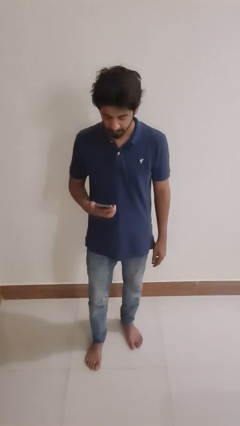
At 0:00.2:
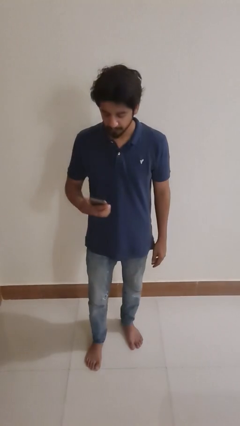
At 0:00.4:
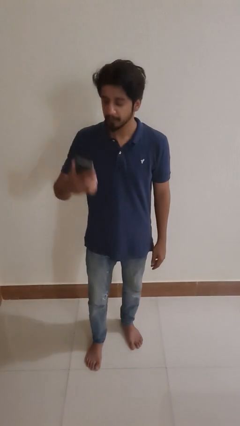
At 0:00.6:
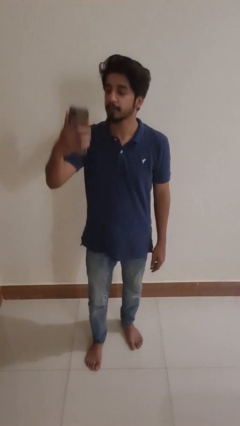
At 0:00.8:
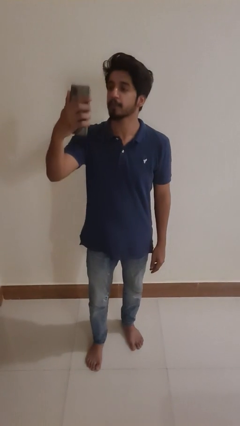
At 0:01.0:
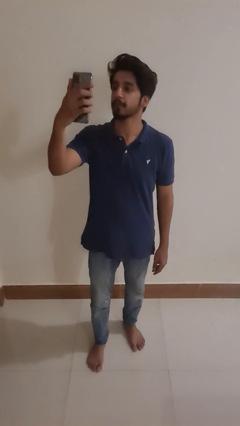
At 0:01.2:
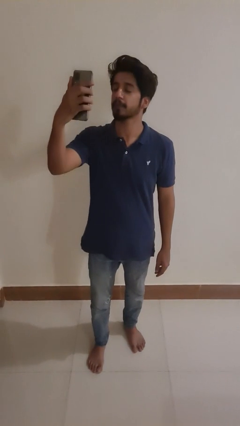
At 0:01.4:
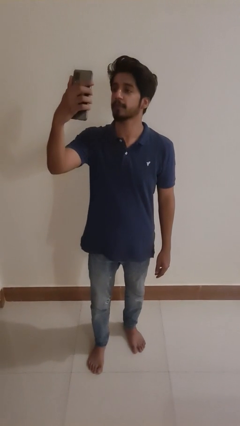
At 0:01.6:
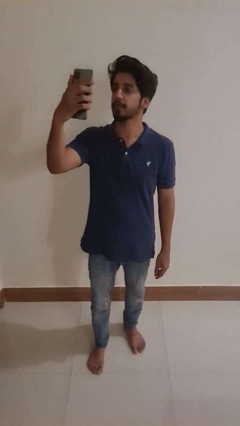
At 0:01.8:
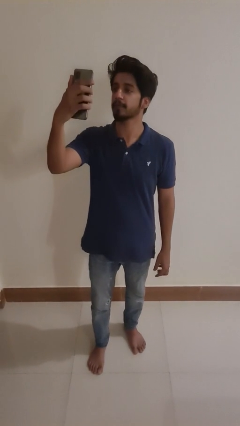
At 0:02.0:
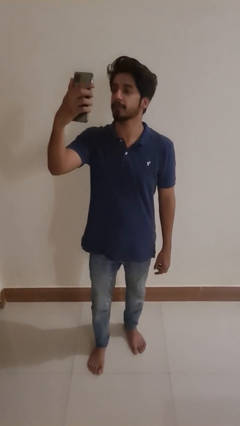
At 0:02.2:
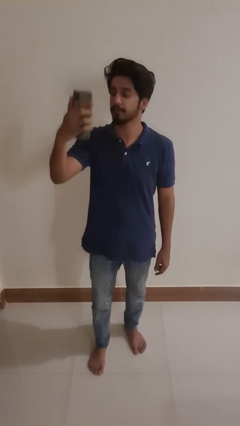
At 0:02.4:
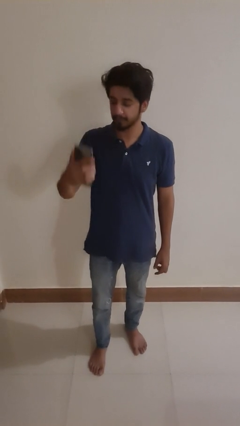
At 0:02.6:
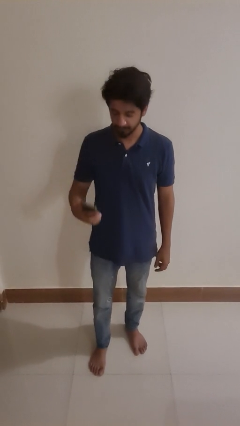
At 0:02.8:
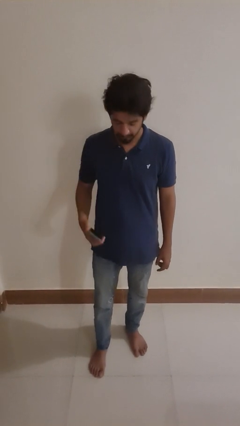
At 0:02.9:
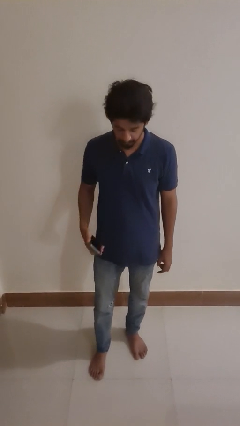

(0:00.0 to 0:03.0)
person takes selfie

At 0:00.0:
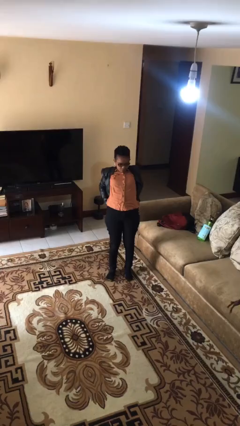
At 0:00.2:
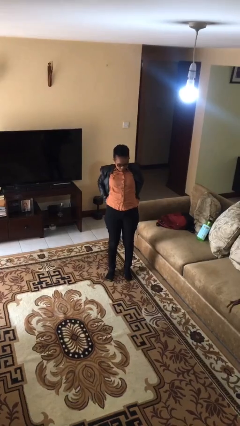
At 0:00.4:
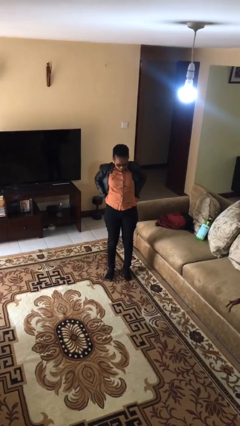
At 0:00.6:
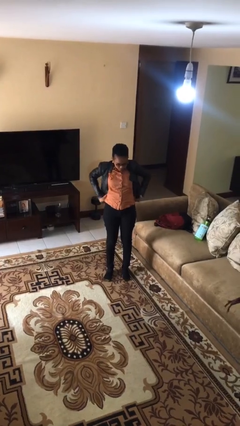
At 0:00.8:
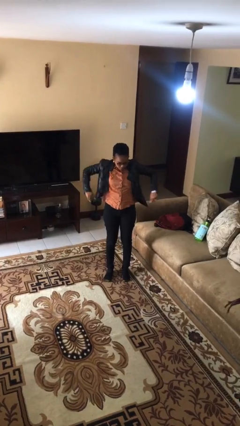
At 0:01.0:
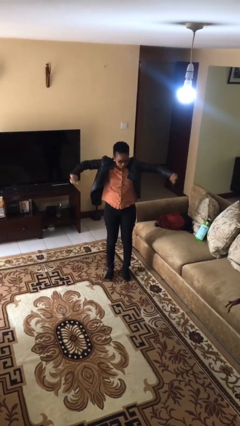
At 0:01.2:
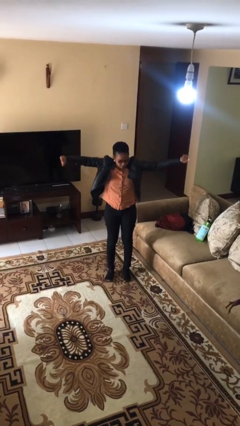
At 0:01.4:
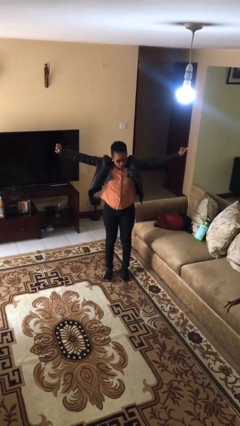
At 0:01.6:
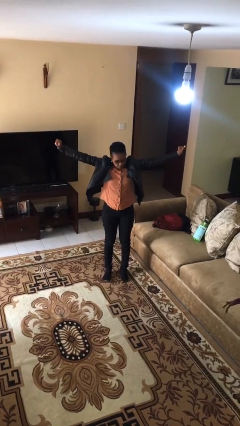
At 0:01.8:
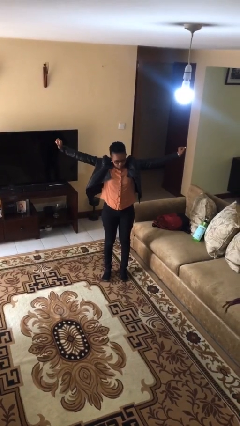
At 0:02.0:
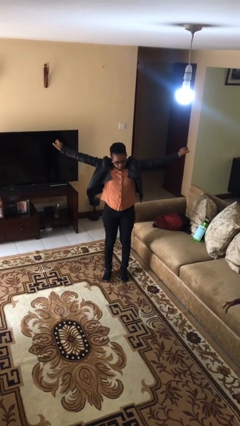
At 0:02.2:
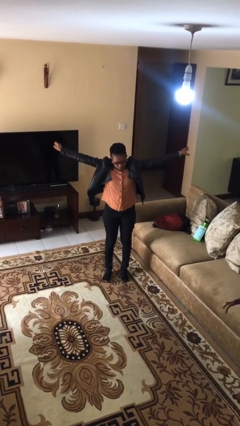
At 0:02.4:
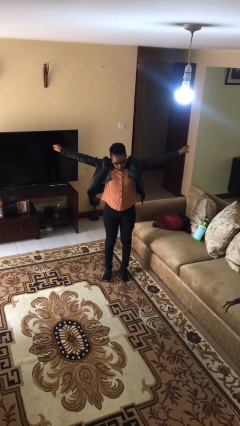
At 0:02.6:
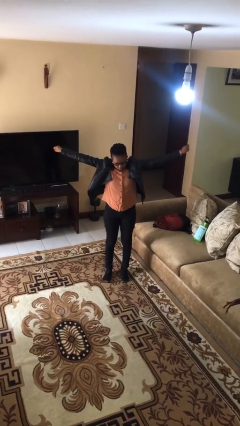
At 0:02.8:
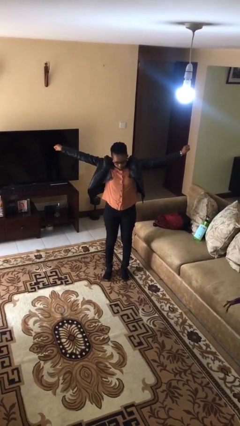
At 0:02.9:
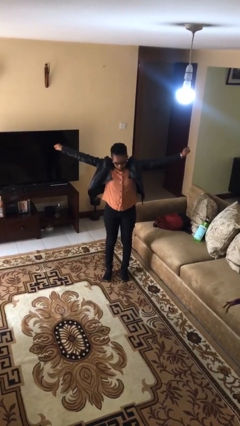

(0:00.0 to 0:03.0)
person stretches arms to side

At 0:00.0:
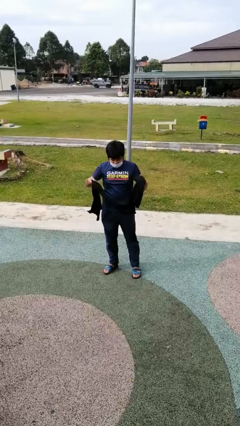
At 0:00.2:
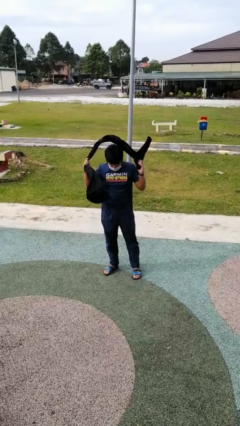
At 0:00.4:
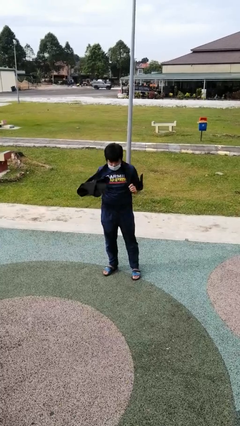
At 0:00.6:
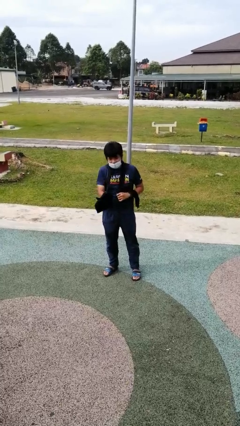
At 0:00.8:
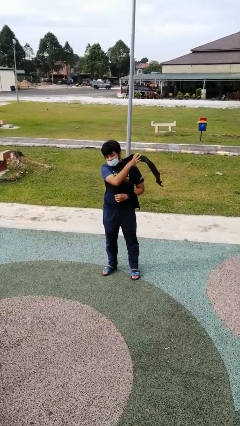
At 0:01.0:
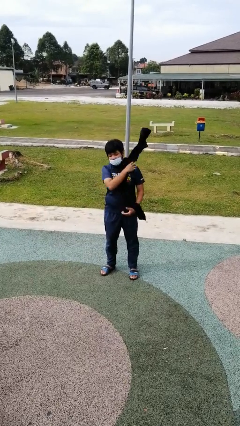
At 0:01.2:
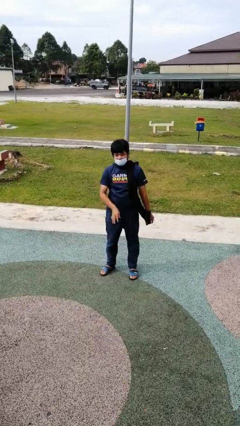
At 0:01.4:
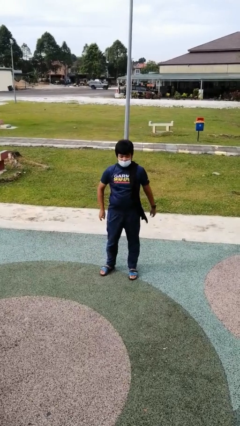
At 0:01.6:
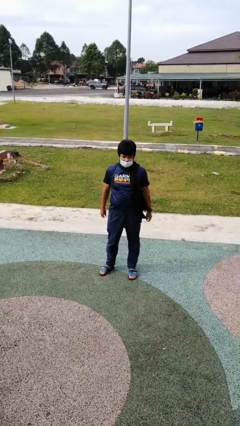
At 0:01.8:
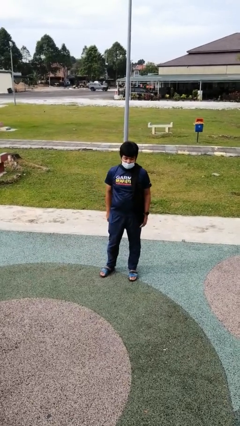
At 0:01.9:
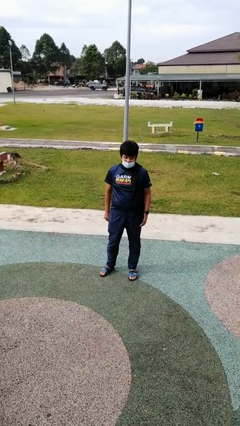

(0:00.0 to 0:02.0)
person puts on scarf

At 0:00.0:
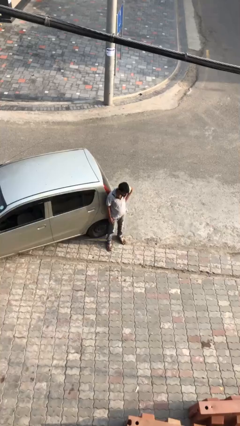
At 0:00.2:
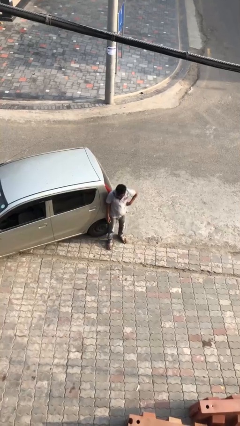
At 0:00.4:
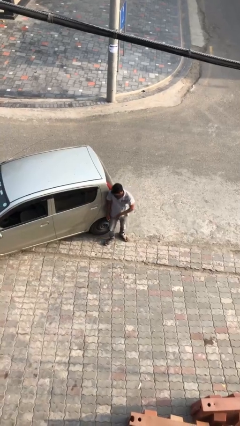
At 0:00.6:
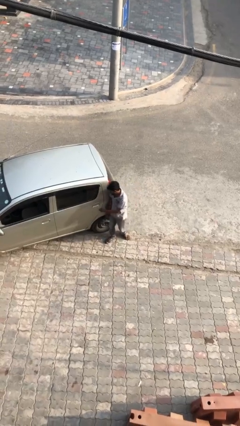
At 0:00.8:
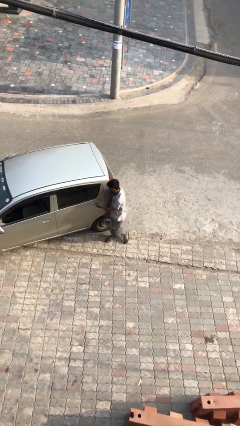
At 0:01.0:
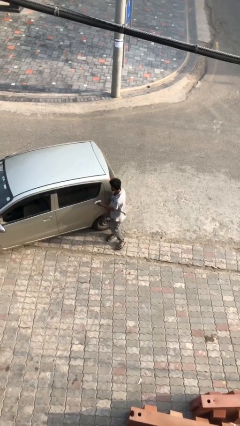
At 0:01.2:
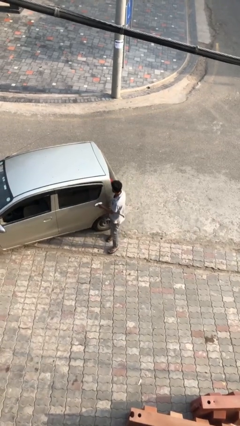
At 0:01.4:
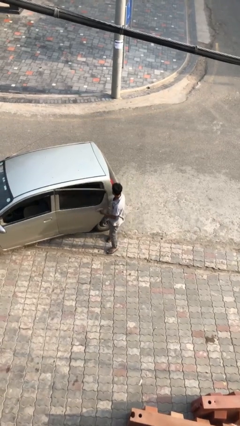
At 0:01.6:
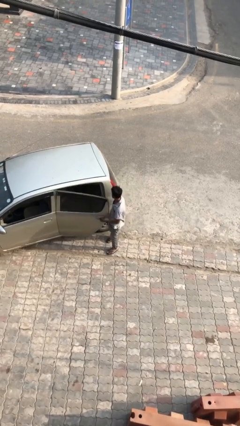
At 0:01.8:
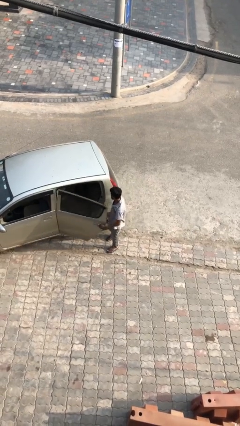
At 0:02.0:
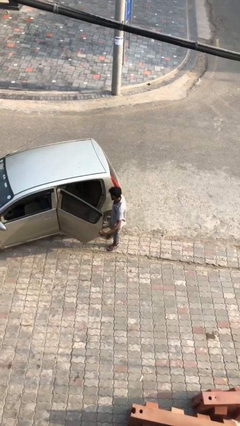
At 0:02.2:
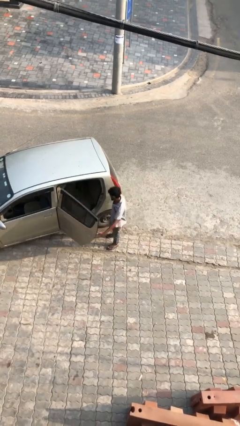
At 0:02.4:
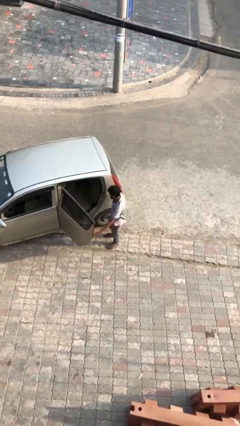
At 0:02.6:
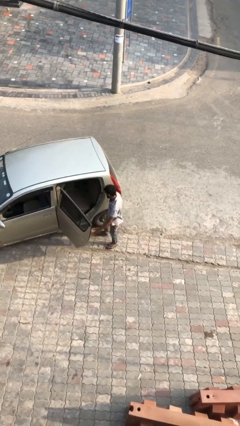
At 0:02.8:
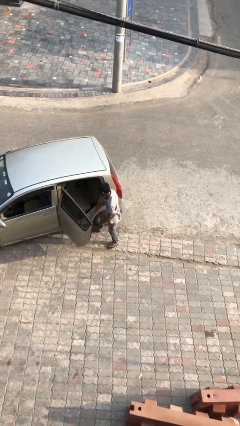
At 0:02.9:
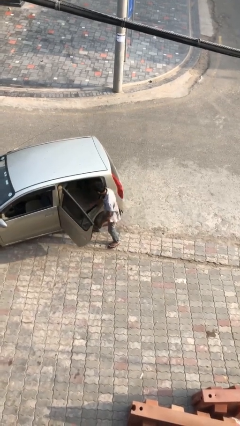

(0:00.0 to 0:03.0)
person opens car door

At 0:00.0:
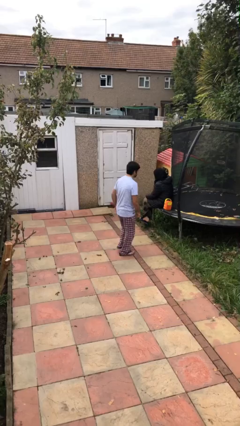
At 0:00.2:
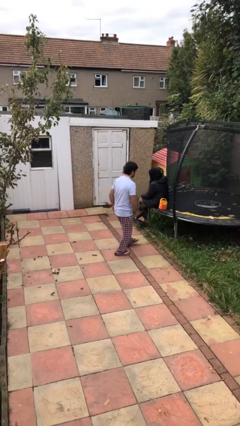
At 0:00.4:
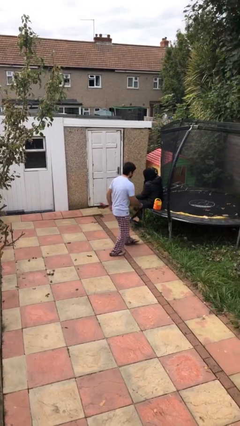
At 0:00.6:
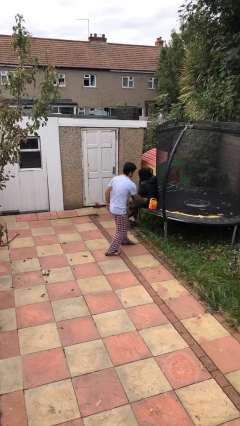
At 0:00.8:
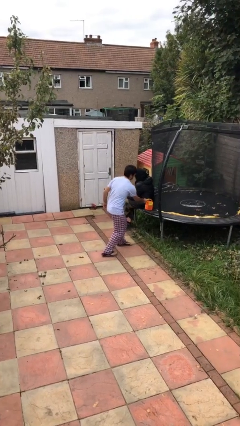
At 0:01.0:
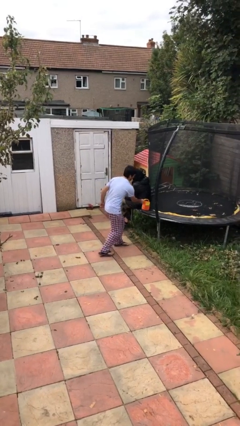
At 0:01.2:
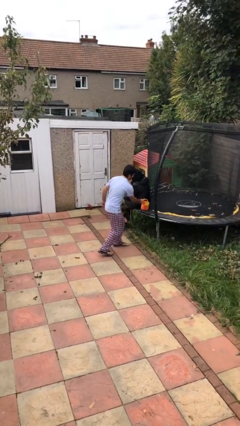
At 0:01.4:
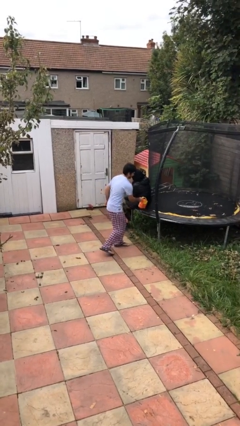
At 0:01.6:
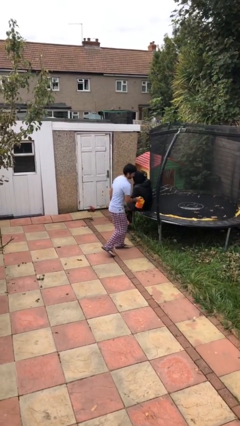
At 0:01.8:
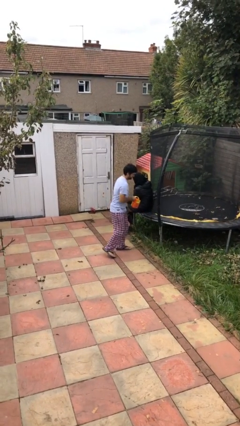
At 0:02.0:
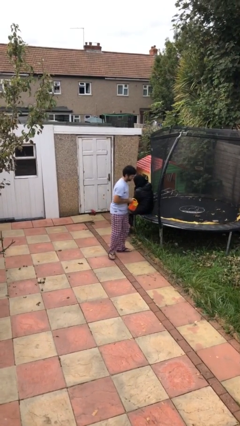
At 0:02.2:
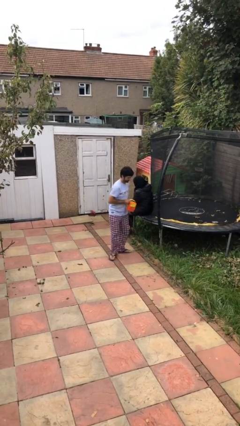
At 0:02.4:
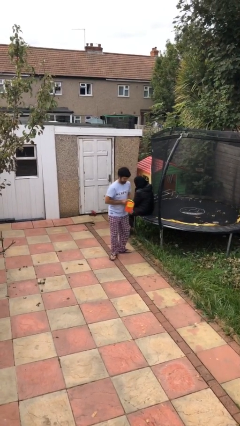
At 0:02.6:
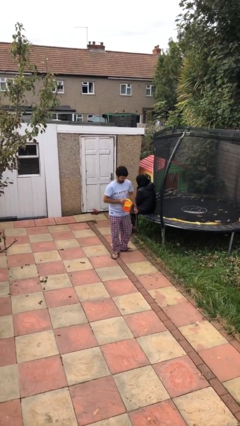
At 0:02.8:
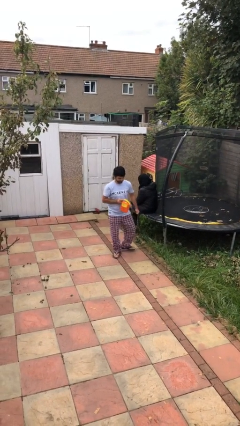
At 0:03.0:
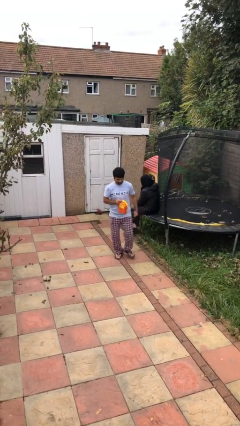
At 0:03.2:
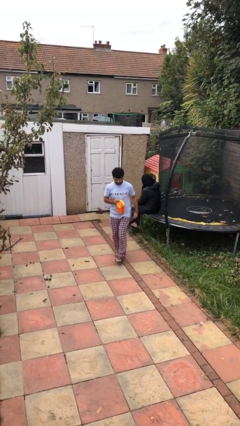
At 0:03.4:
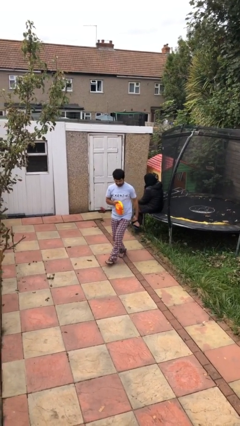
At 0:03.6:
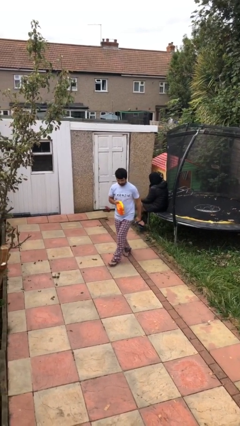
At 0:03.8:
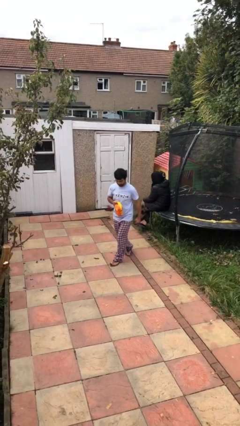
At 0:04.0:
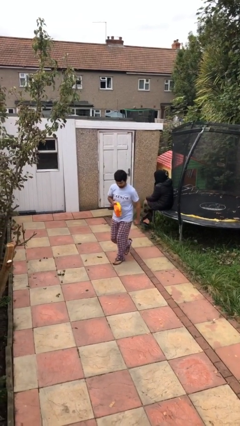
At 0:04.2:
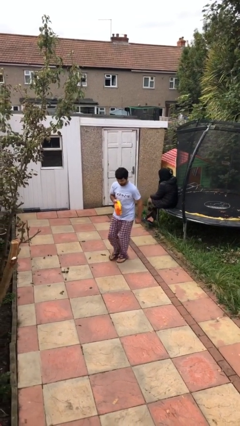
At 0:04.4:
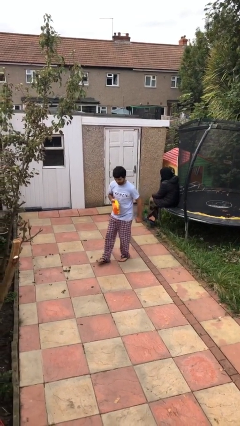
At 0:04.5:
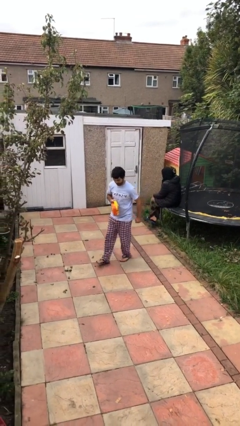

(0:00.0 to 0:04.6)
person steals object from person

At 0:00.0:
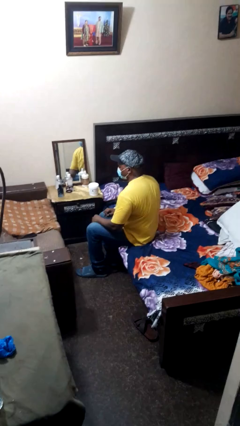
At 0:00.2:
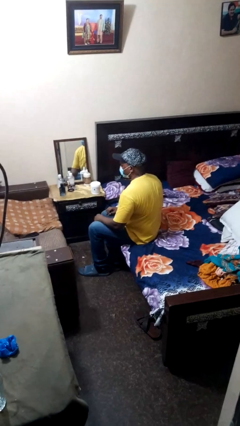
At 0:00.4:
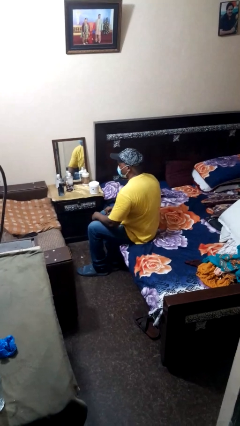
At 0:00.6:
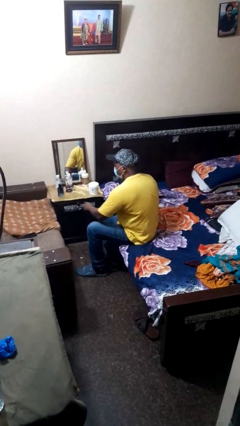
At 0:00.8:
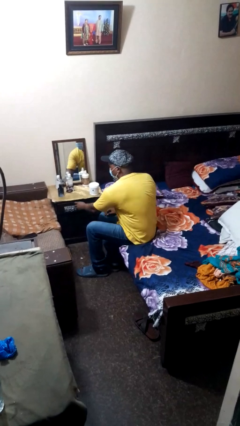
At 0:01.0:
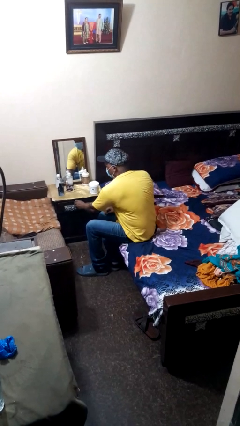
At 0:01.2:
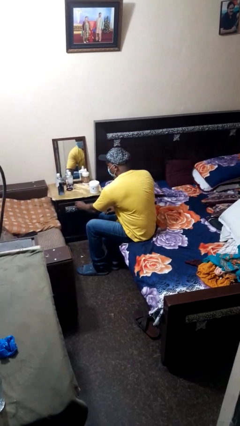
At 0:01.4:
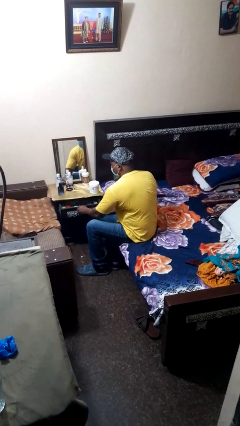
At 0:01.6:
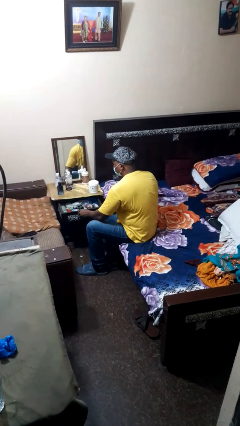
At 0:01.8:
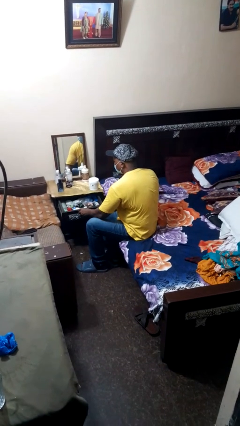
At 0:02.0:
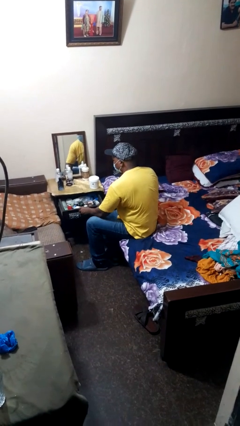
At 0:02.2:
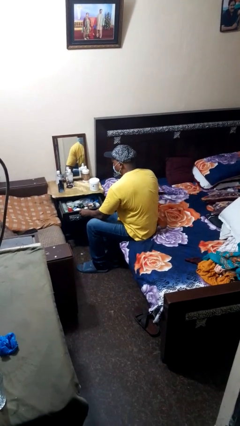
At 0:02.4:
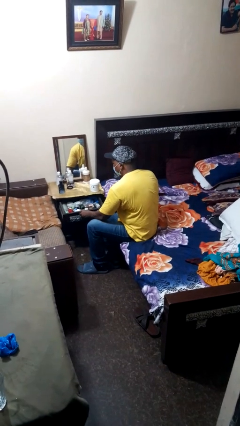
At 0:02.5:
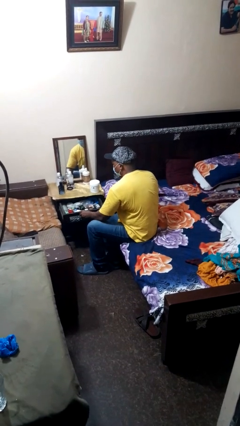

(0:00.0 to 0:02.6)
person opens dresser drawer
